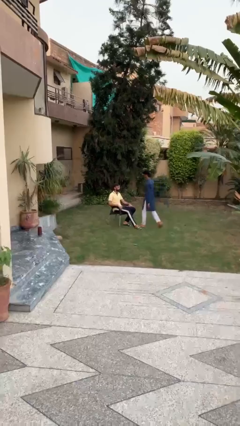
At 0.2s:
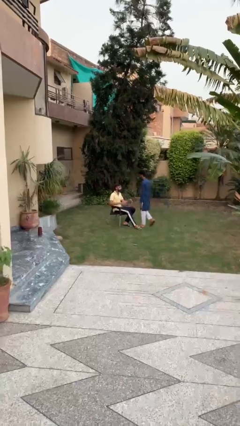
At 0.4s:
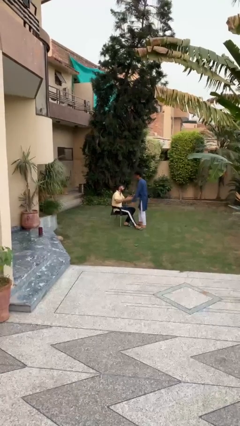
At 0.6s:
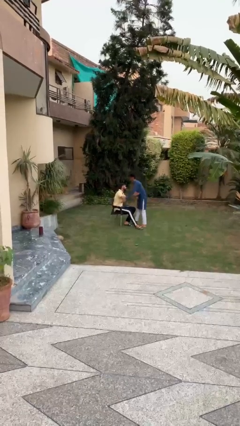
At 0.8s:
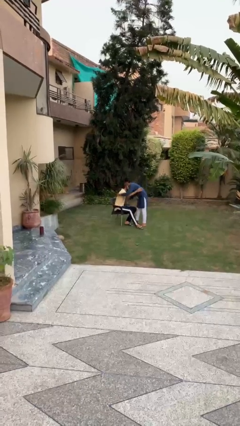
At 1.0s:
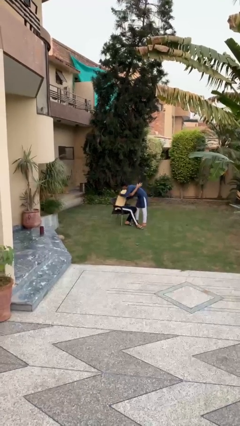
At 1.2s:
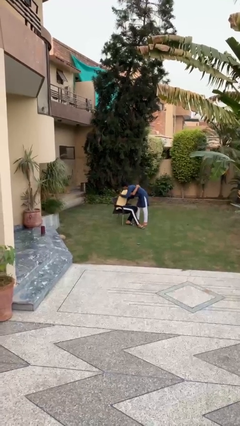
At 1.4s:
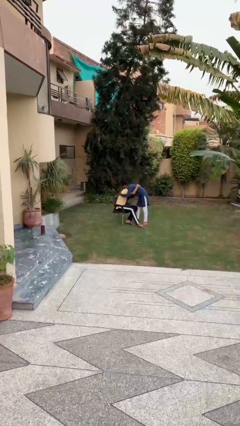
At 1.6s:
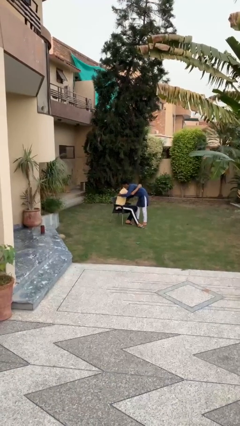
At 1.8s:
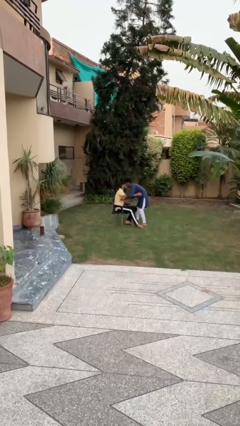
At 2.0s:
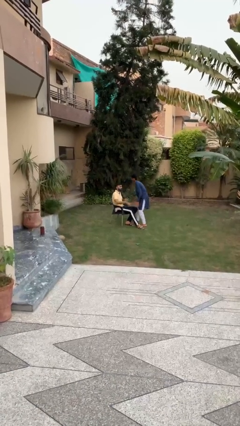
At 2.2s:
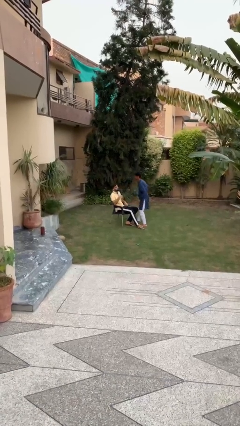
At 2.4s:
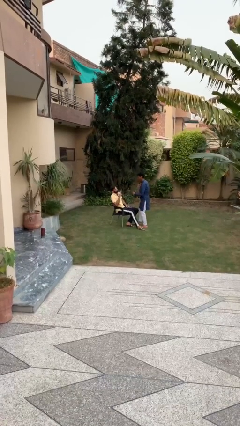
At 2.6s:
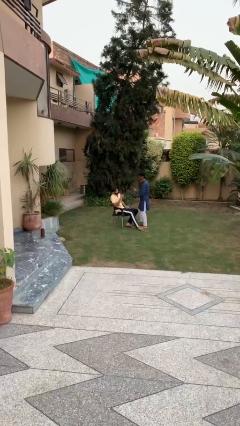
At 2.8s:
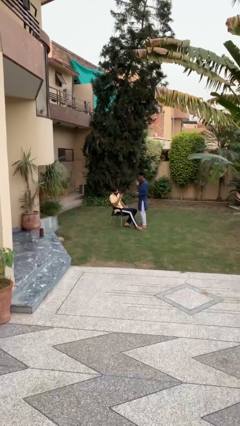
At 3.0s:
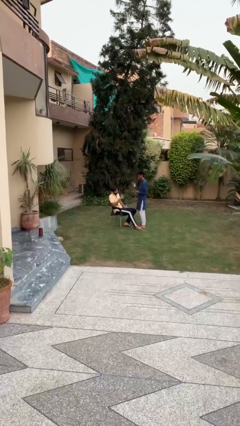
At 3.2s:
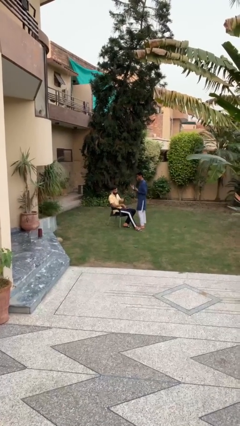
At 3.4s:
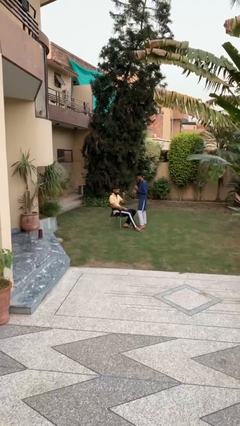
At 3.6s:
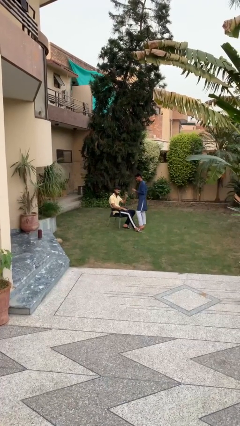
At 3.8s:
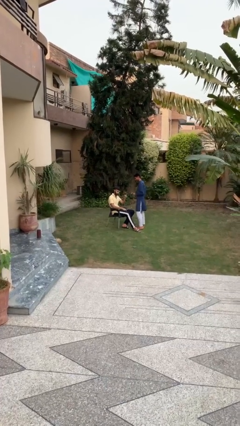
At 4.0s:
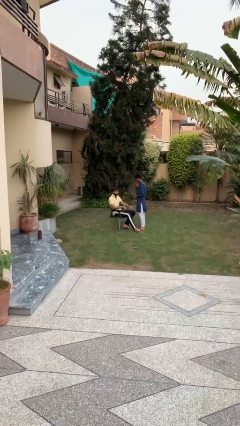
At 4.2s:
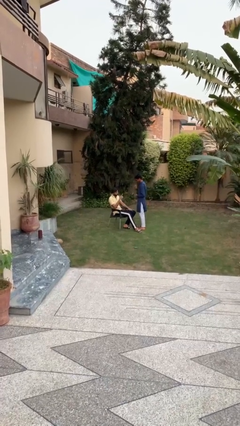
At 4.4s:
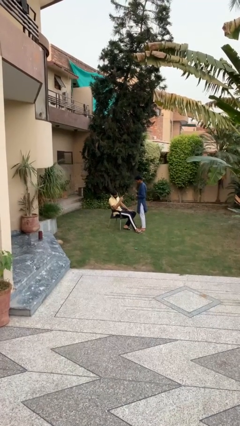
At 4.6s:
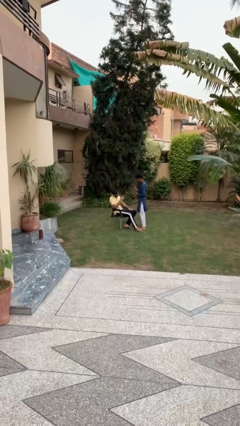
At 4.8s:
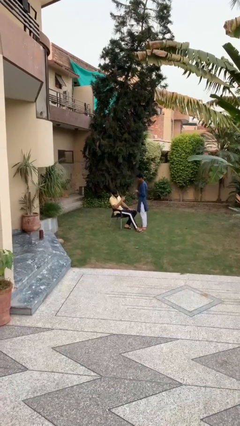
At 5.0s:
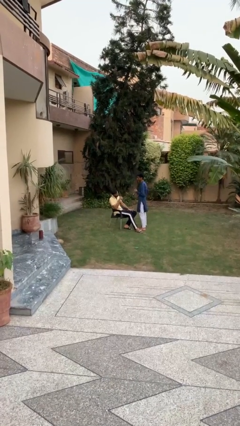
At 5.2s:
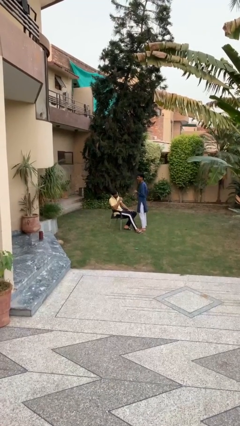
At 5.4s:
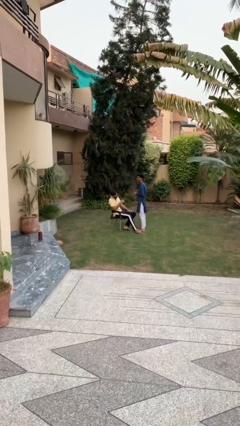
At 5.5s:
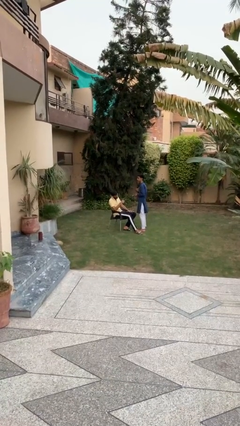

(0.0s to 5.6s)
person embraces person

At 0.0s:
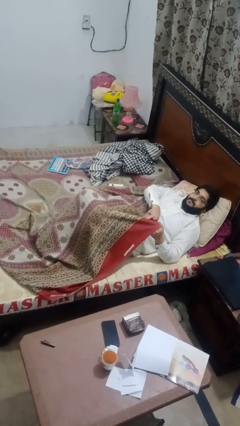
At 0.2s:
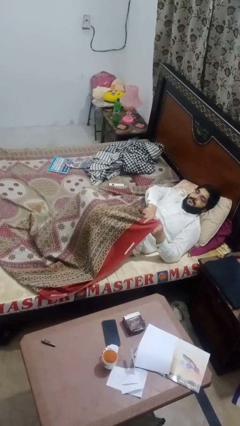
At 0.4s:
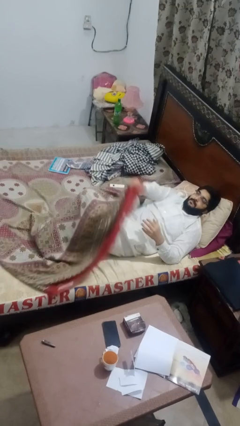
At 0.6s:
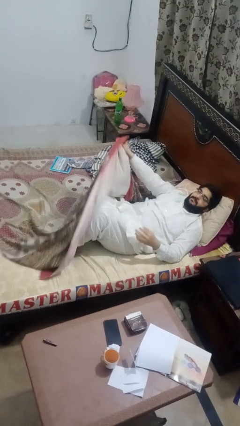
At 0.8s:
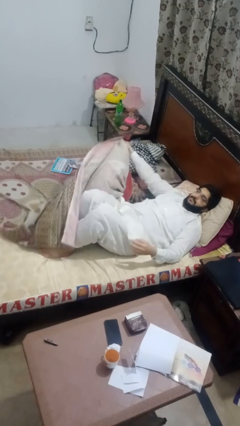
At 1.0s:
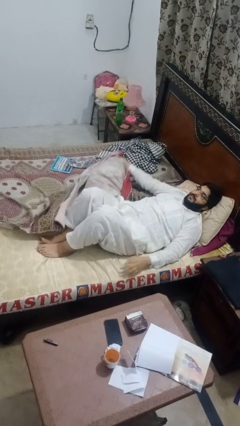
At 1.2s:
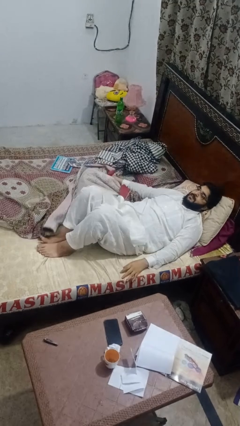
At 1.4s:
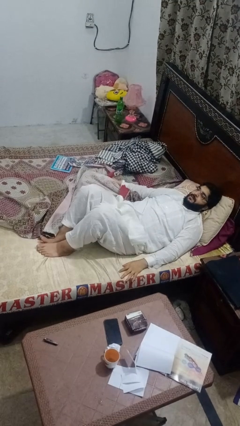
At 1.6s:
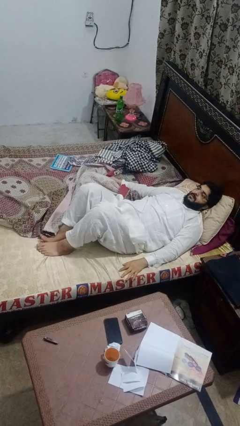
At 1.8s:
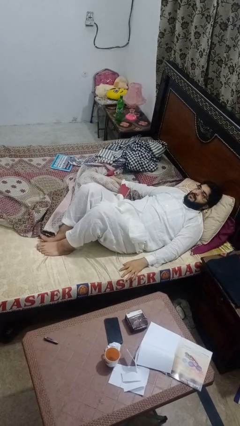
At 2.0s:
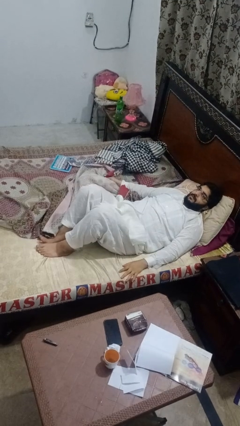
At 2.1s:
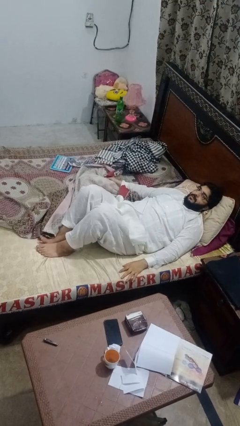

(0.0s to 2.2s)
person uncovers with bedsheets

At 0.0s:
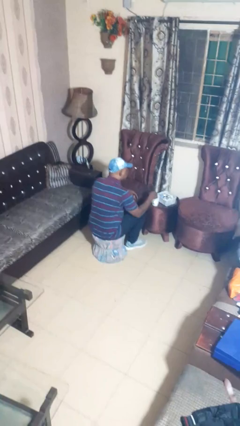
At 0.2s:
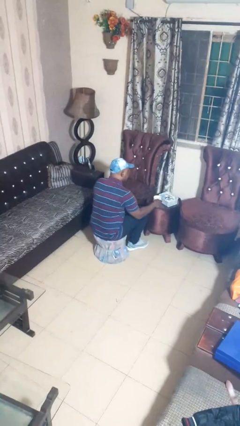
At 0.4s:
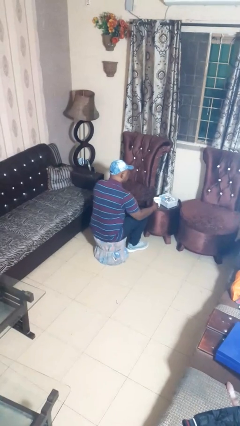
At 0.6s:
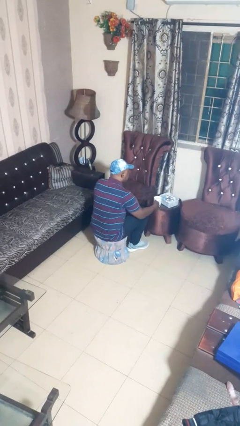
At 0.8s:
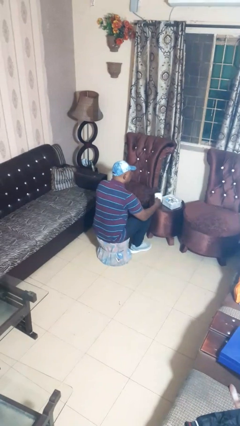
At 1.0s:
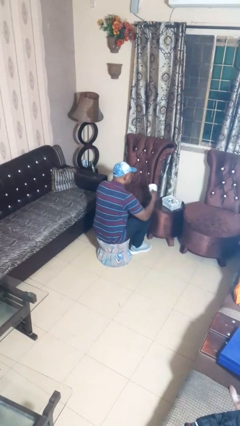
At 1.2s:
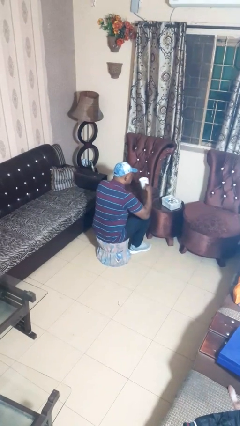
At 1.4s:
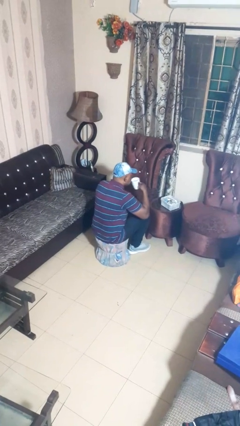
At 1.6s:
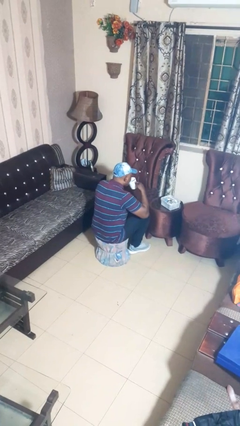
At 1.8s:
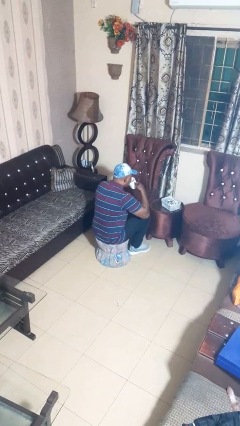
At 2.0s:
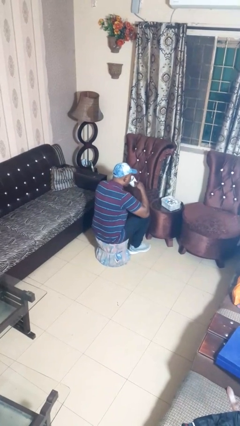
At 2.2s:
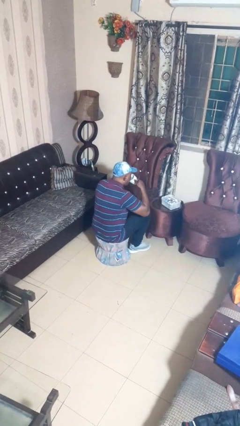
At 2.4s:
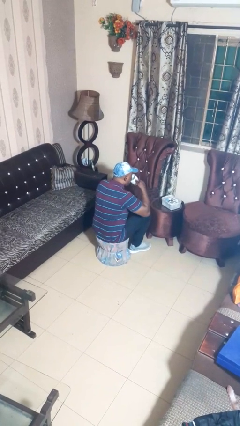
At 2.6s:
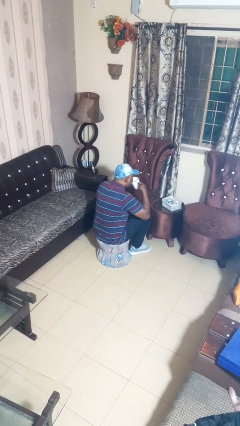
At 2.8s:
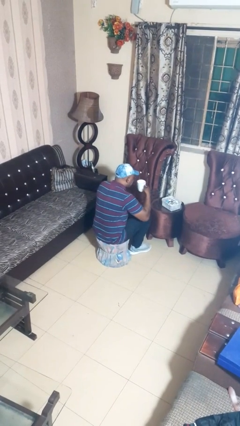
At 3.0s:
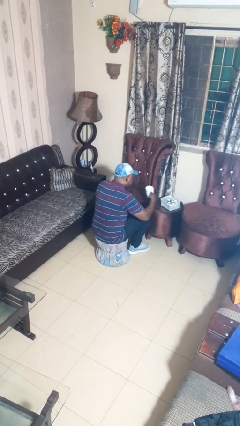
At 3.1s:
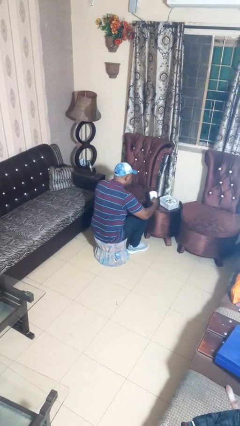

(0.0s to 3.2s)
person drinks from cup

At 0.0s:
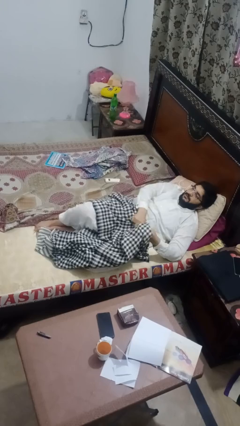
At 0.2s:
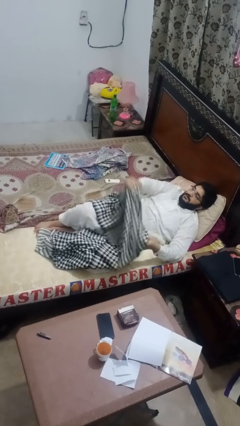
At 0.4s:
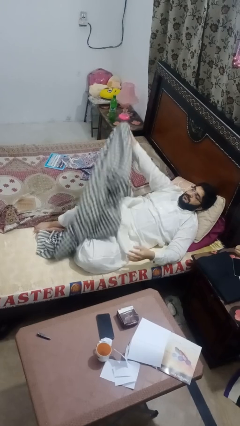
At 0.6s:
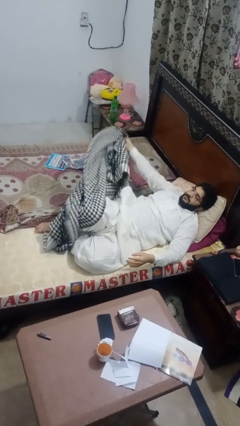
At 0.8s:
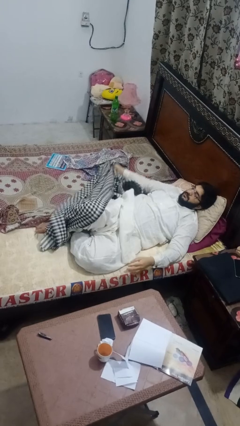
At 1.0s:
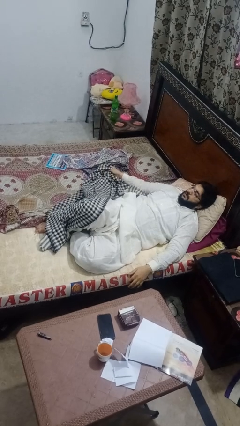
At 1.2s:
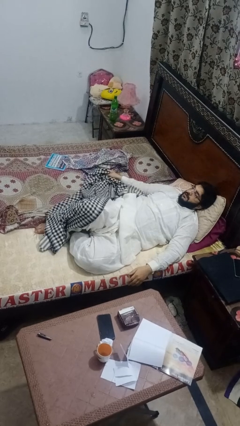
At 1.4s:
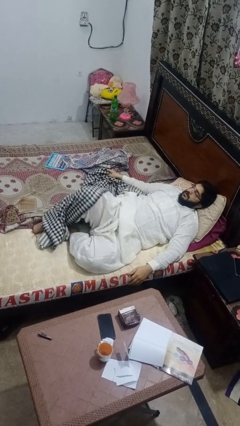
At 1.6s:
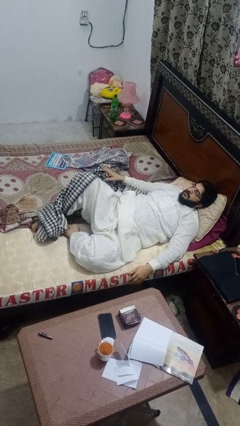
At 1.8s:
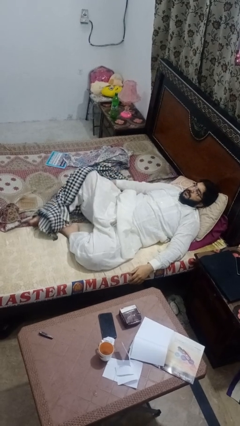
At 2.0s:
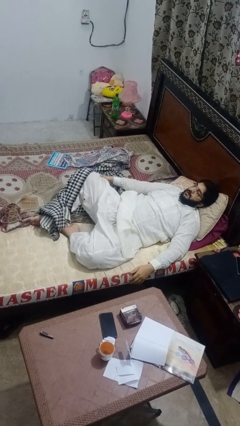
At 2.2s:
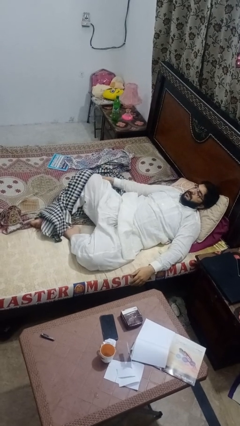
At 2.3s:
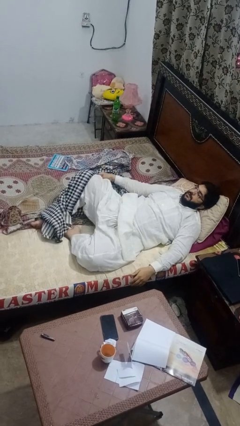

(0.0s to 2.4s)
person uncovers with blanket

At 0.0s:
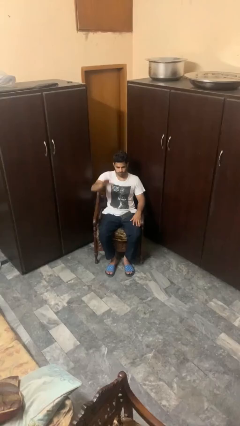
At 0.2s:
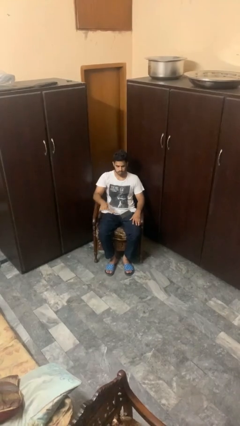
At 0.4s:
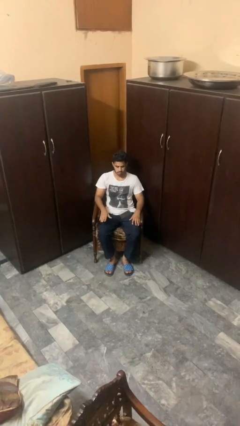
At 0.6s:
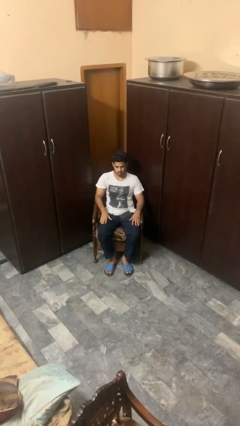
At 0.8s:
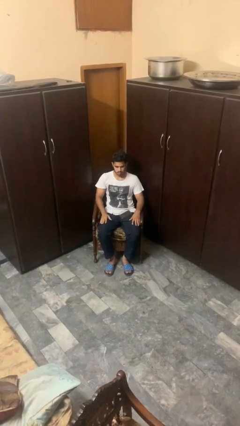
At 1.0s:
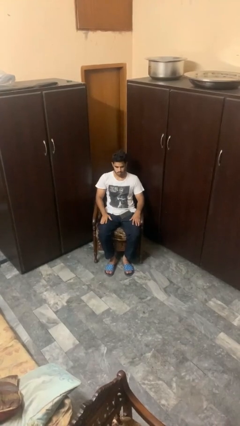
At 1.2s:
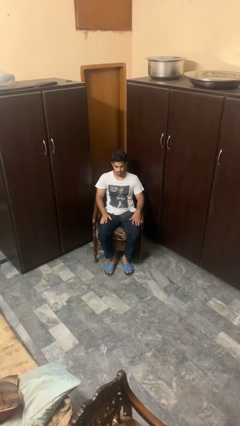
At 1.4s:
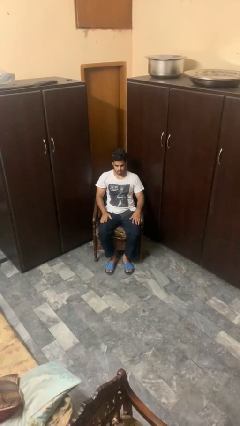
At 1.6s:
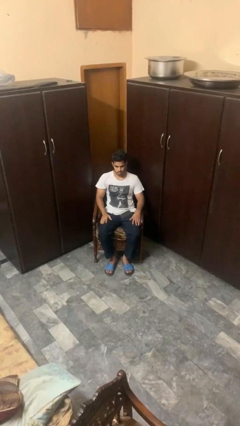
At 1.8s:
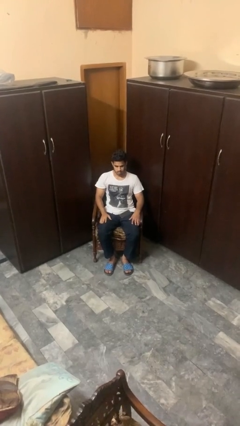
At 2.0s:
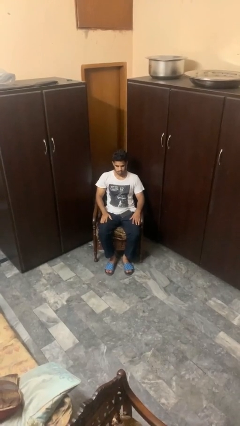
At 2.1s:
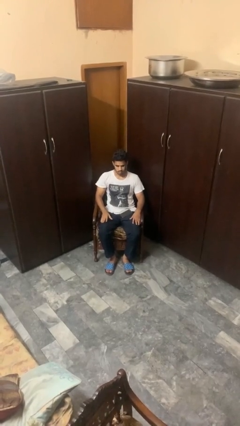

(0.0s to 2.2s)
person gestures lower hand

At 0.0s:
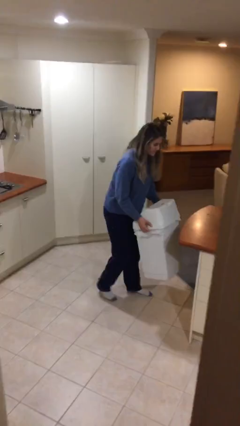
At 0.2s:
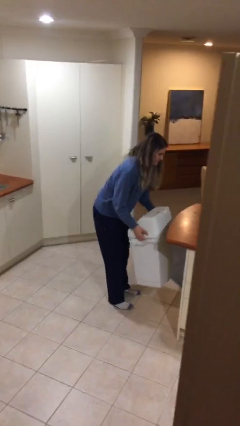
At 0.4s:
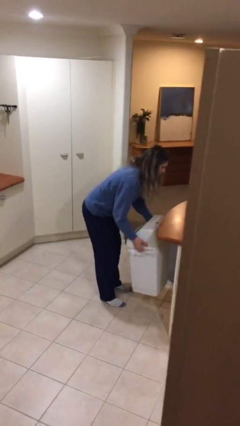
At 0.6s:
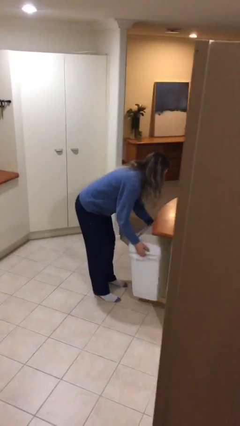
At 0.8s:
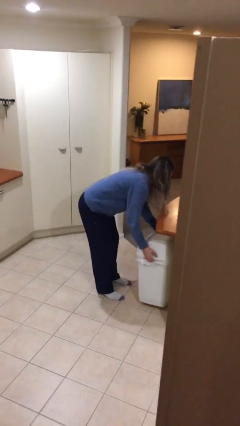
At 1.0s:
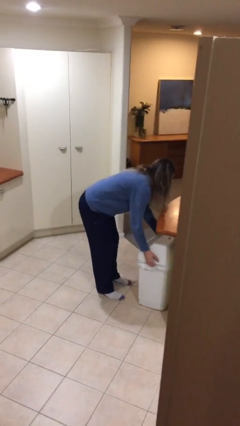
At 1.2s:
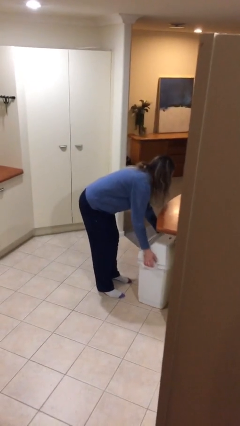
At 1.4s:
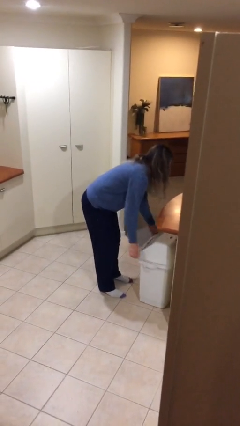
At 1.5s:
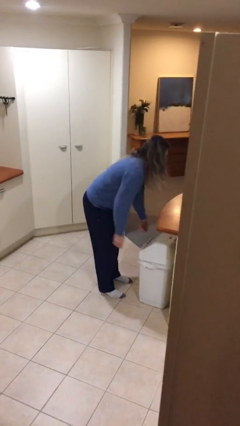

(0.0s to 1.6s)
person puts down object on floor
